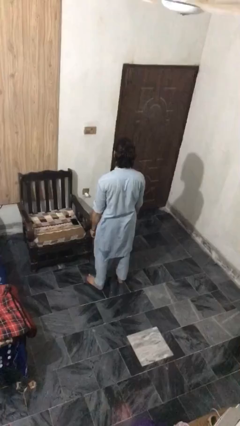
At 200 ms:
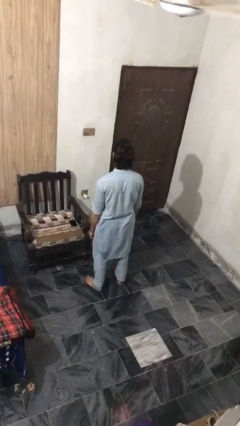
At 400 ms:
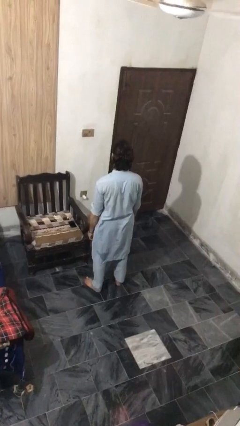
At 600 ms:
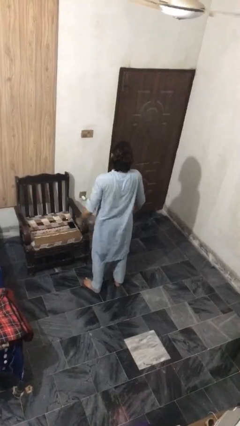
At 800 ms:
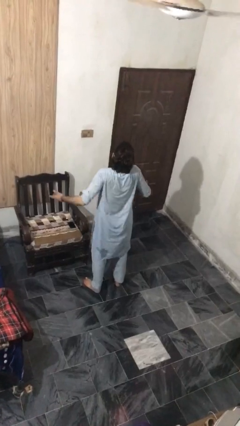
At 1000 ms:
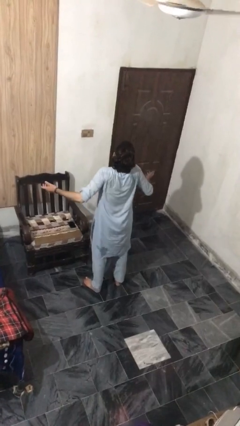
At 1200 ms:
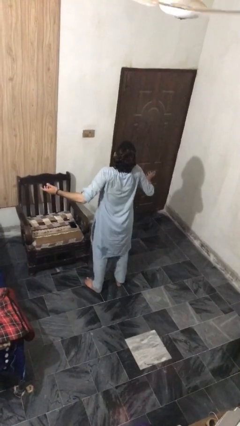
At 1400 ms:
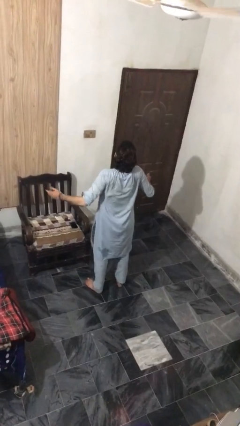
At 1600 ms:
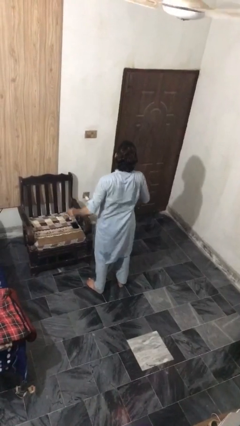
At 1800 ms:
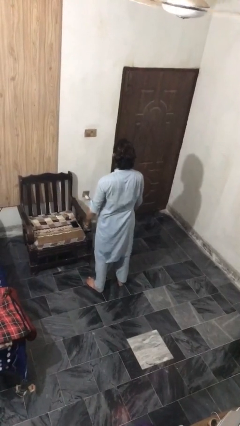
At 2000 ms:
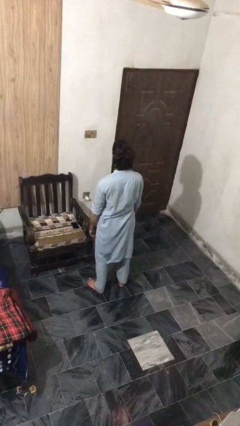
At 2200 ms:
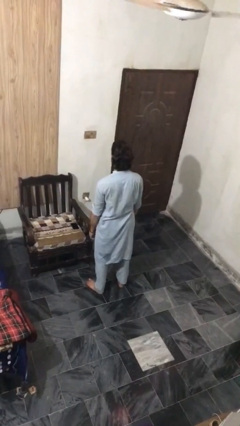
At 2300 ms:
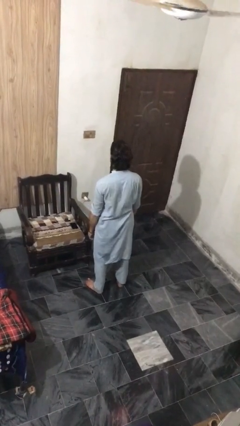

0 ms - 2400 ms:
person shrugs

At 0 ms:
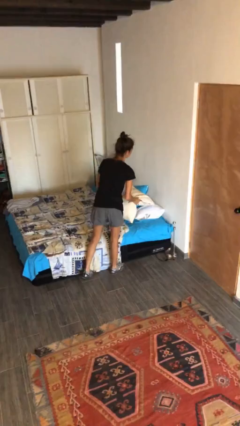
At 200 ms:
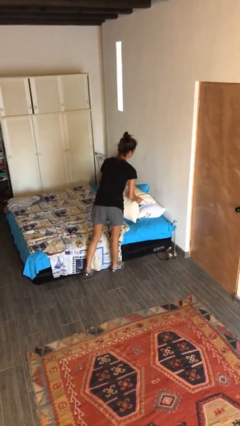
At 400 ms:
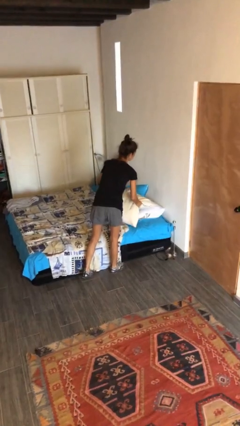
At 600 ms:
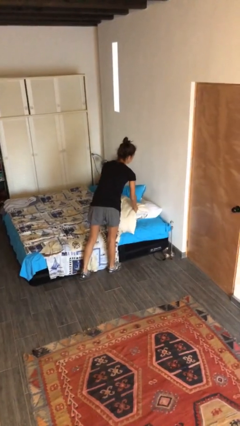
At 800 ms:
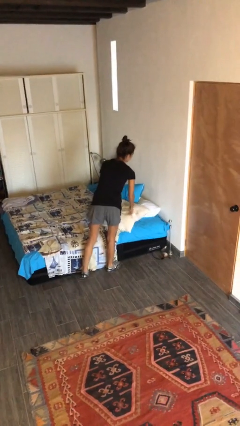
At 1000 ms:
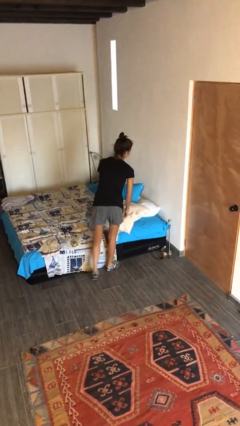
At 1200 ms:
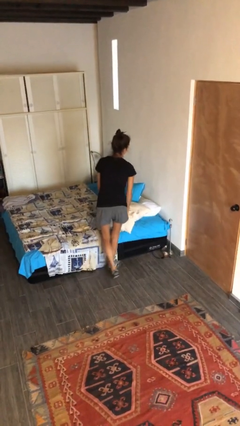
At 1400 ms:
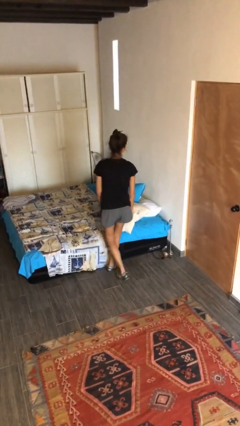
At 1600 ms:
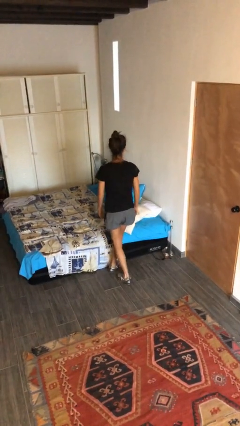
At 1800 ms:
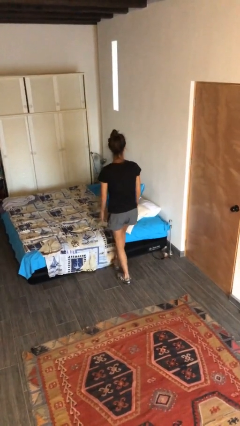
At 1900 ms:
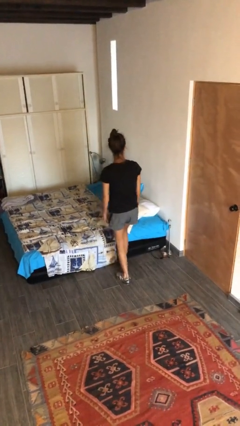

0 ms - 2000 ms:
person puts down object on bed

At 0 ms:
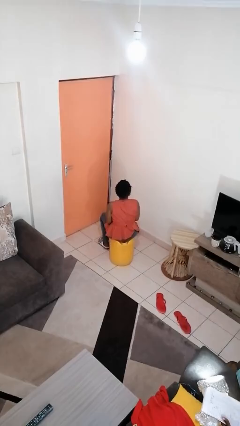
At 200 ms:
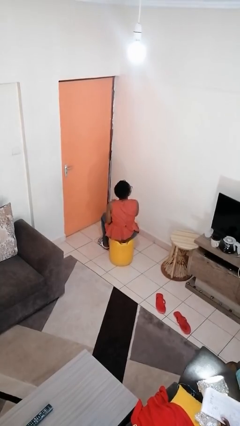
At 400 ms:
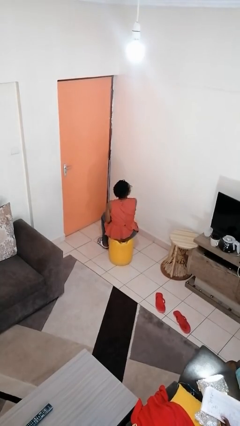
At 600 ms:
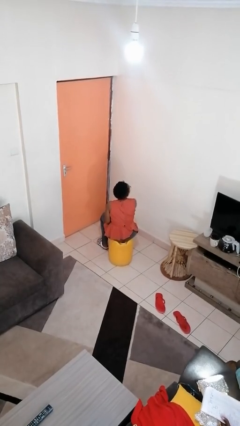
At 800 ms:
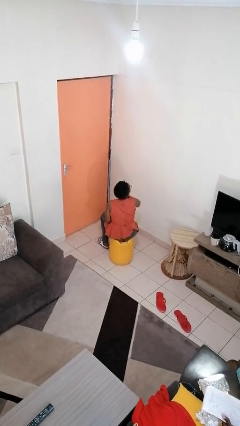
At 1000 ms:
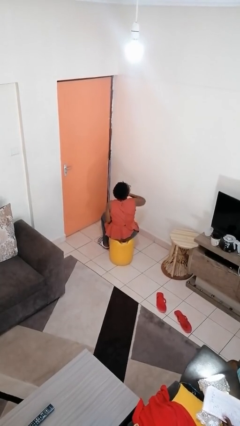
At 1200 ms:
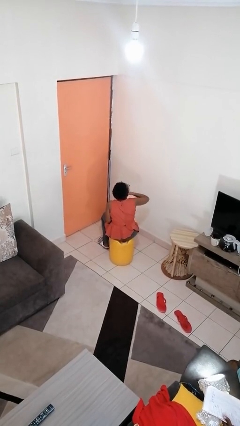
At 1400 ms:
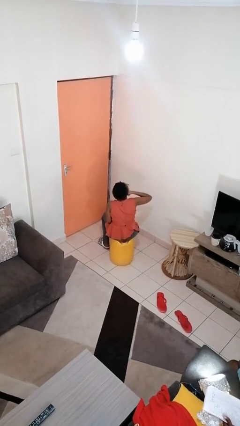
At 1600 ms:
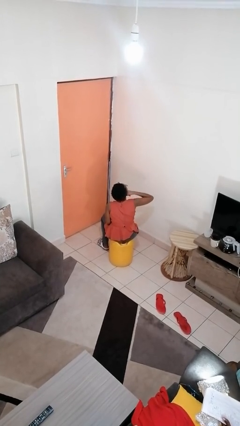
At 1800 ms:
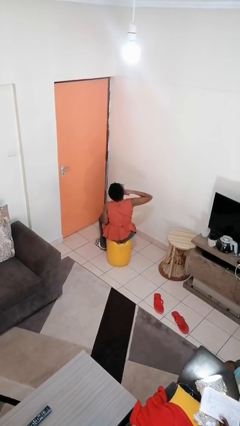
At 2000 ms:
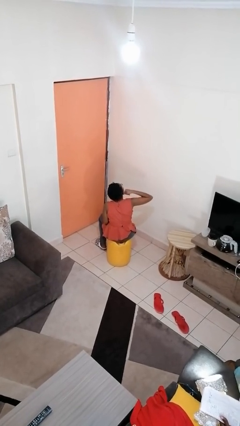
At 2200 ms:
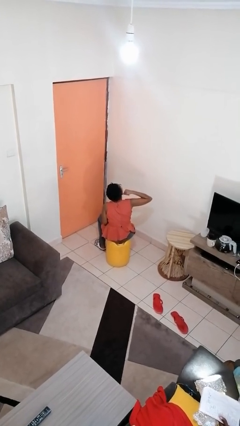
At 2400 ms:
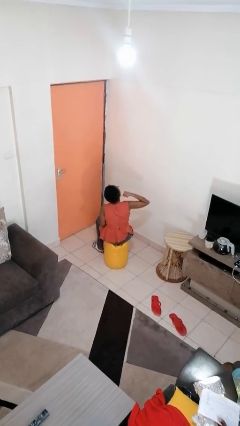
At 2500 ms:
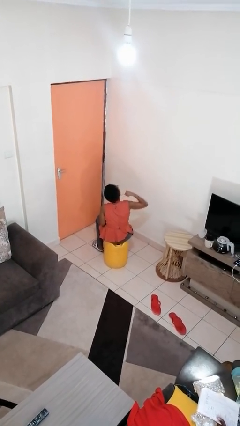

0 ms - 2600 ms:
person gestures cut

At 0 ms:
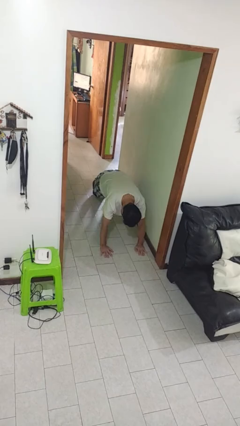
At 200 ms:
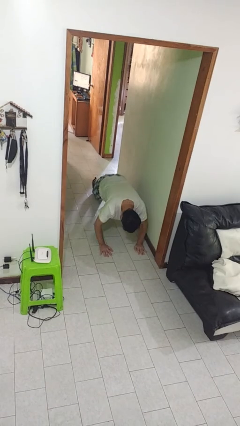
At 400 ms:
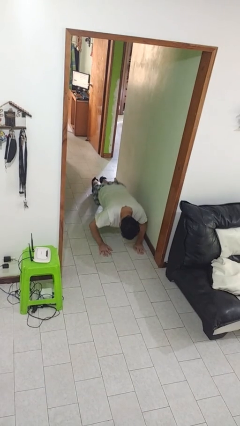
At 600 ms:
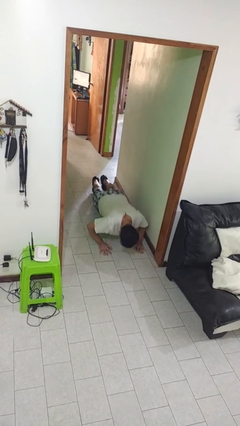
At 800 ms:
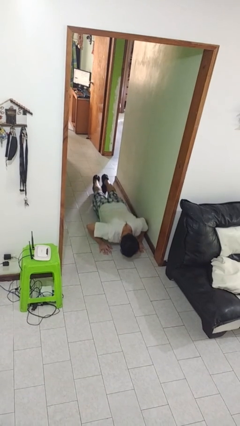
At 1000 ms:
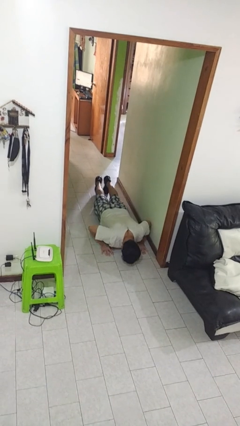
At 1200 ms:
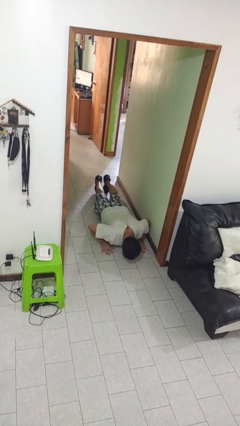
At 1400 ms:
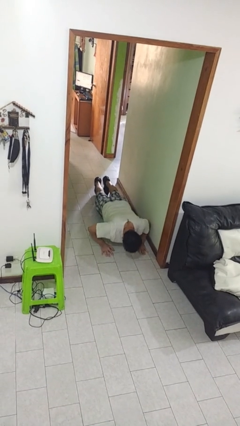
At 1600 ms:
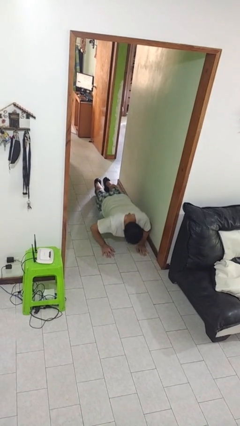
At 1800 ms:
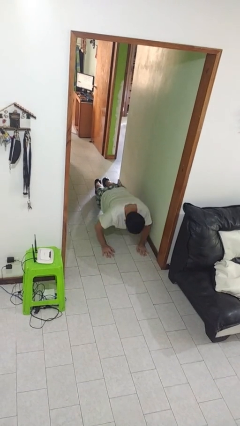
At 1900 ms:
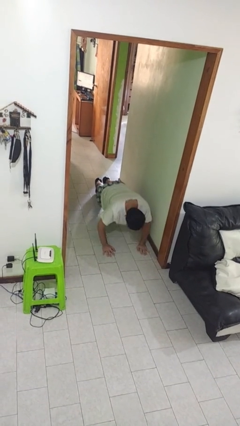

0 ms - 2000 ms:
person exercises with pushup

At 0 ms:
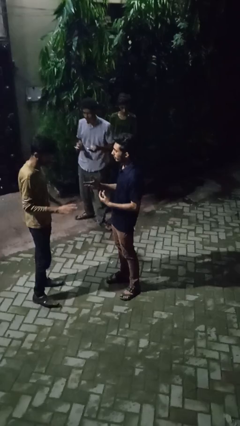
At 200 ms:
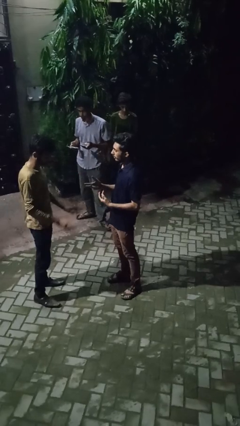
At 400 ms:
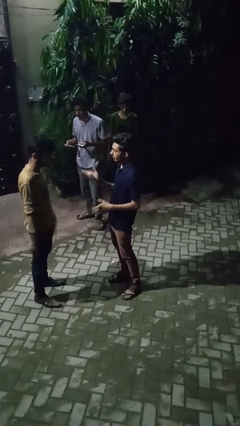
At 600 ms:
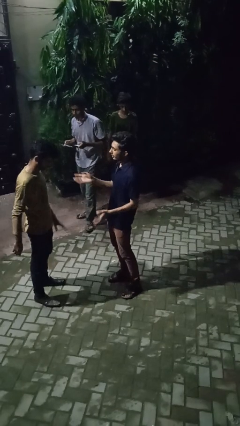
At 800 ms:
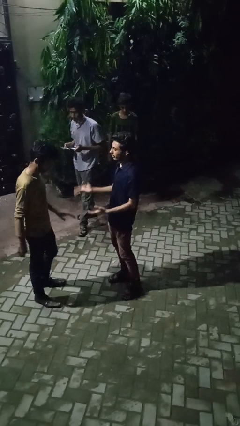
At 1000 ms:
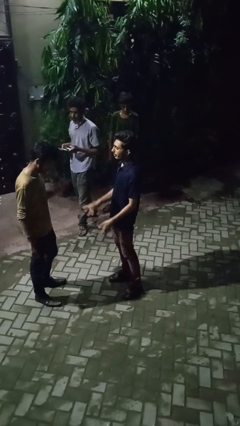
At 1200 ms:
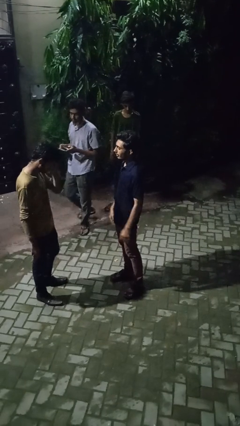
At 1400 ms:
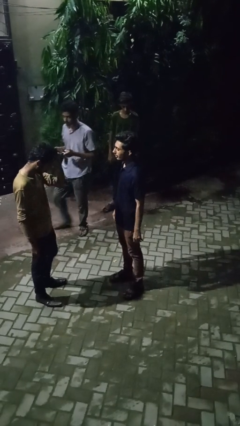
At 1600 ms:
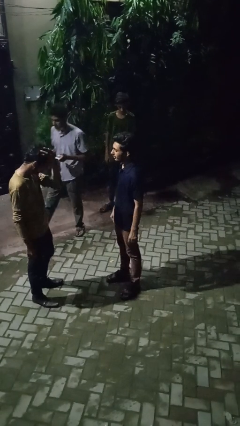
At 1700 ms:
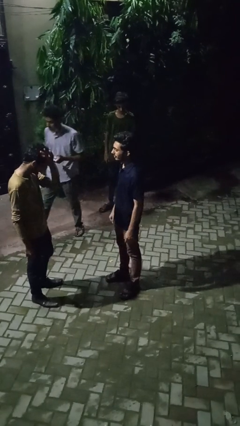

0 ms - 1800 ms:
person talks to person

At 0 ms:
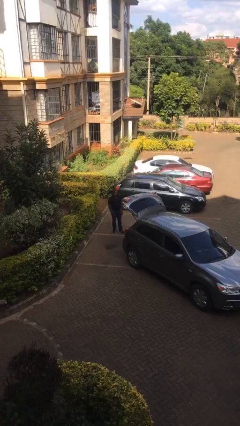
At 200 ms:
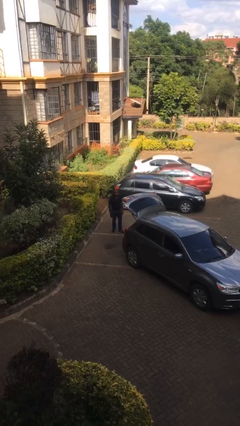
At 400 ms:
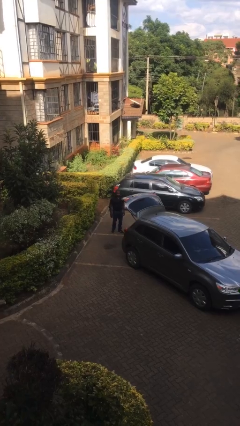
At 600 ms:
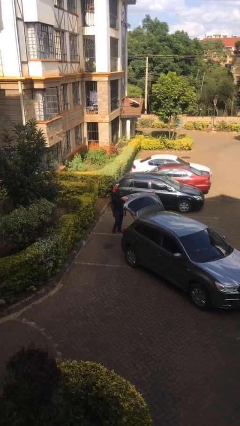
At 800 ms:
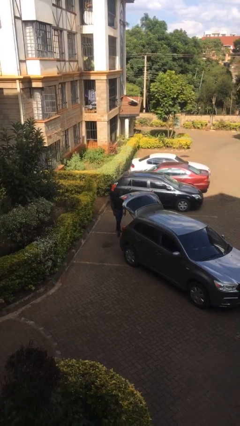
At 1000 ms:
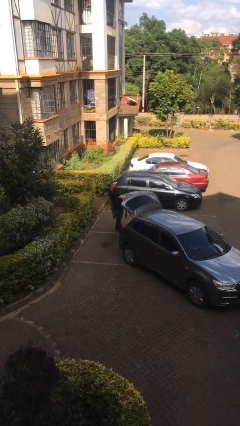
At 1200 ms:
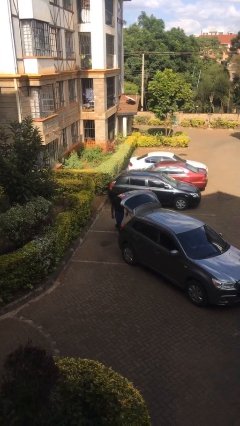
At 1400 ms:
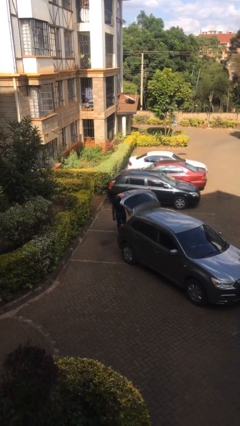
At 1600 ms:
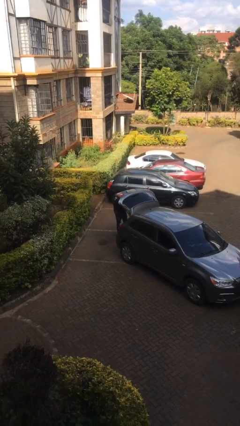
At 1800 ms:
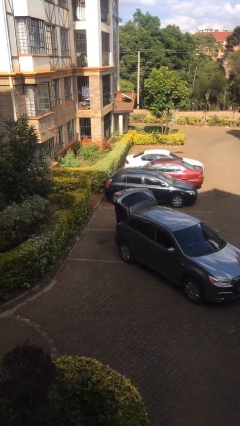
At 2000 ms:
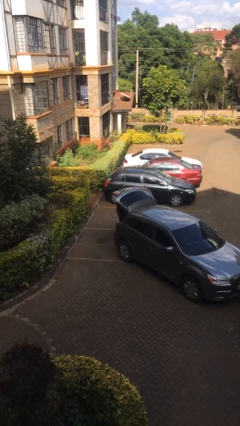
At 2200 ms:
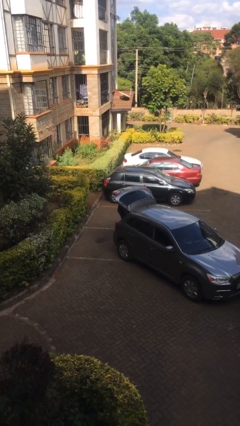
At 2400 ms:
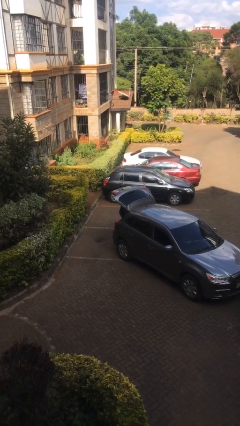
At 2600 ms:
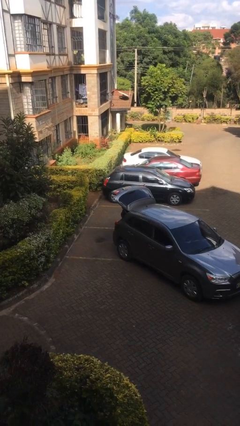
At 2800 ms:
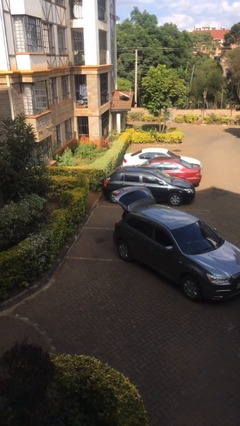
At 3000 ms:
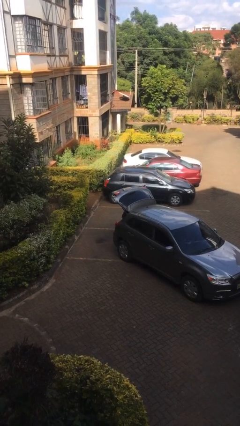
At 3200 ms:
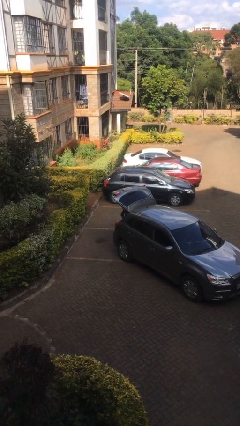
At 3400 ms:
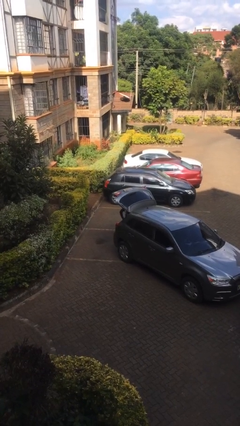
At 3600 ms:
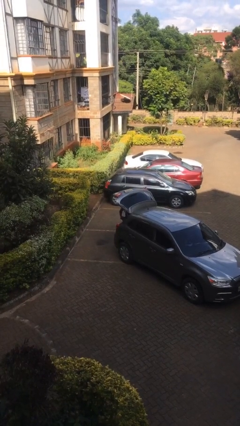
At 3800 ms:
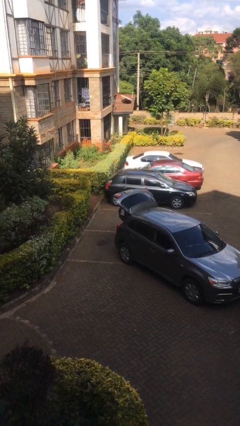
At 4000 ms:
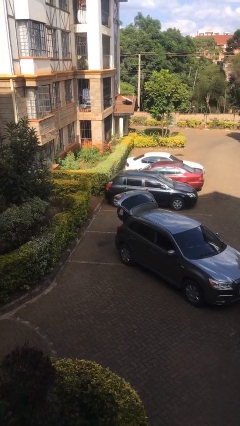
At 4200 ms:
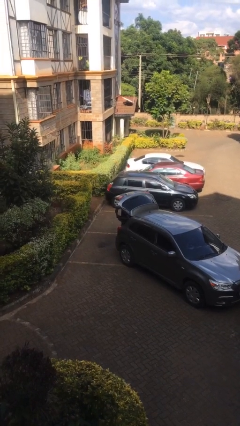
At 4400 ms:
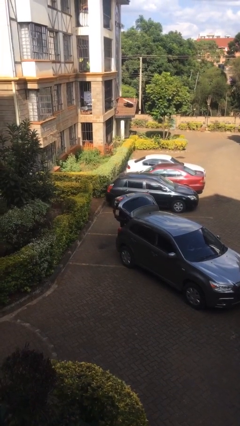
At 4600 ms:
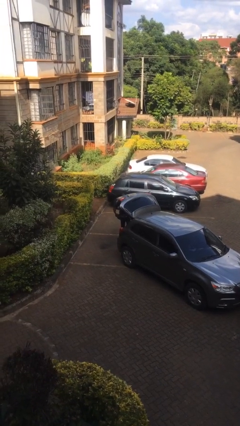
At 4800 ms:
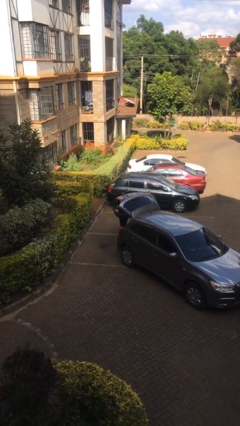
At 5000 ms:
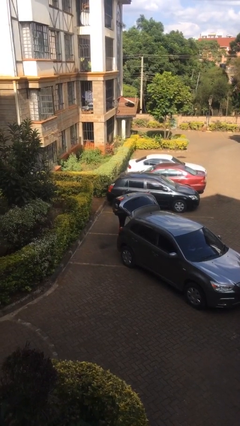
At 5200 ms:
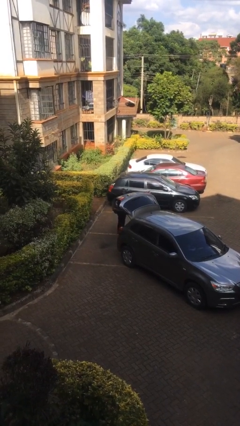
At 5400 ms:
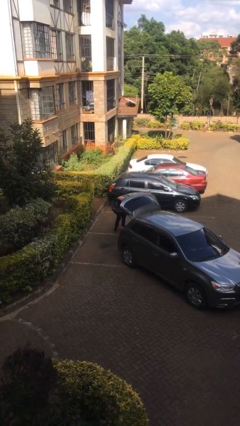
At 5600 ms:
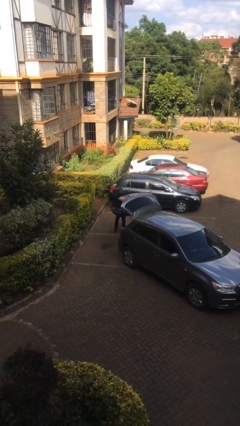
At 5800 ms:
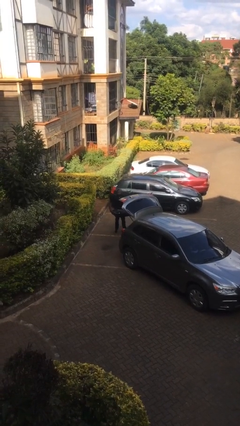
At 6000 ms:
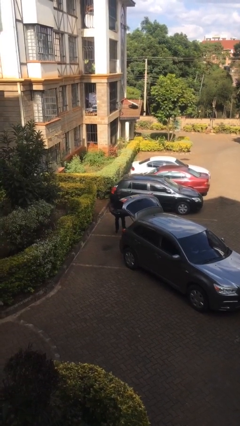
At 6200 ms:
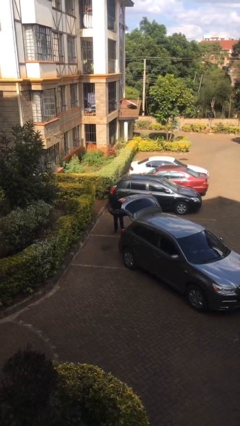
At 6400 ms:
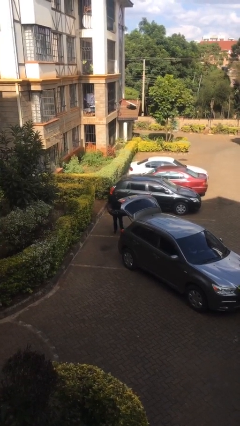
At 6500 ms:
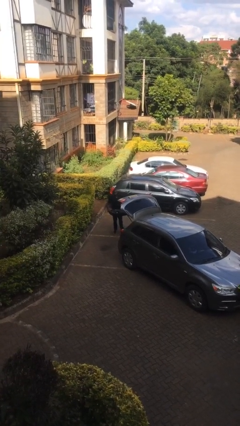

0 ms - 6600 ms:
person unloads car

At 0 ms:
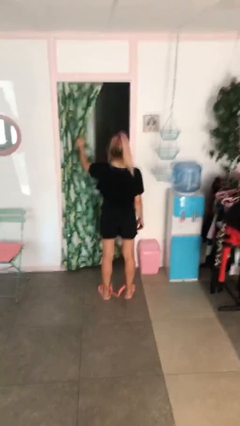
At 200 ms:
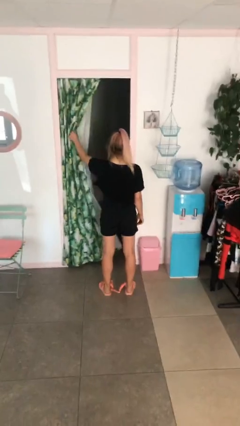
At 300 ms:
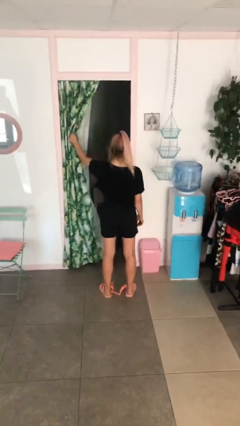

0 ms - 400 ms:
person opens sliding door
